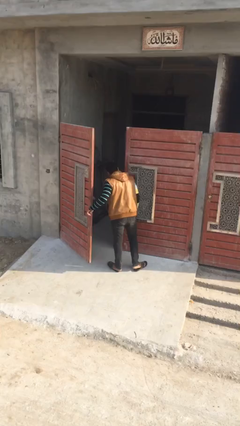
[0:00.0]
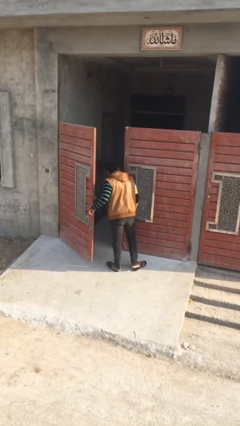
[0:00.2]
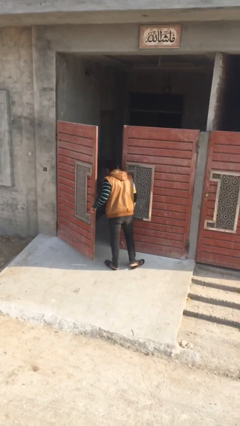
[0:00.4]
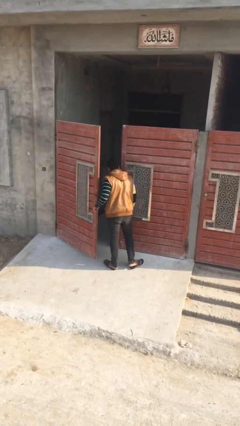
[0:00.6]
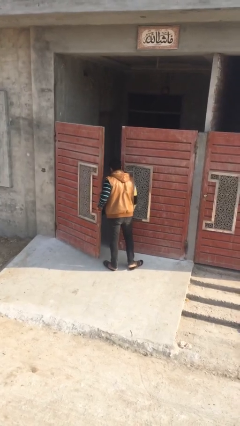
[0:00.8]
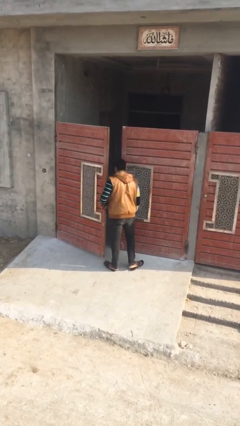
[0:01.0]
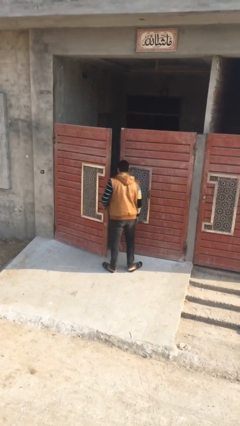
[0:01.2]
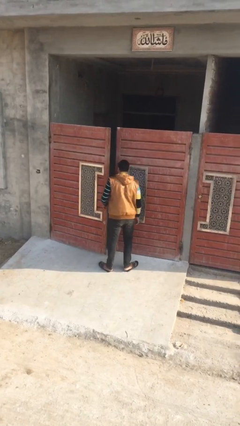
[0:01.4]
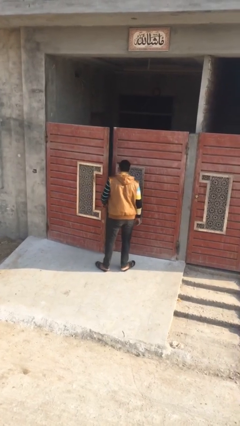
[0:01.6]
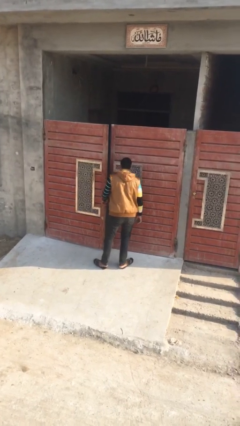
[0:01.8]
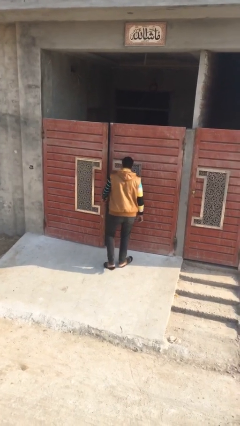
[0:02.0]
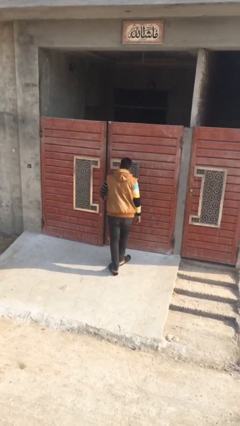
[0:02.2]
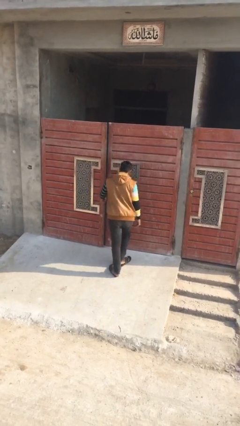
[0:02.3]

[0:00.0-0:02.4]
person closes facility door

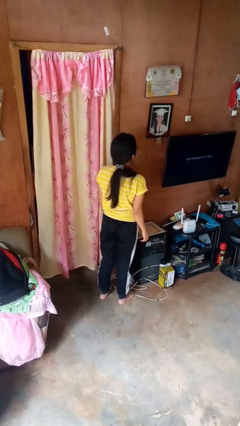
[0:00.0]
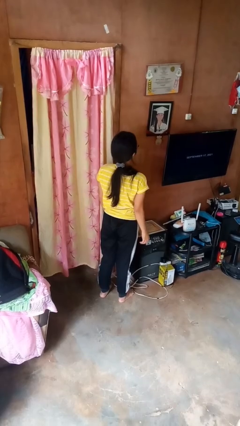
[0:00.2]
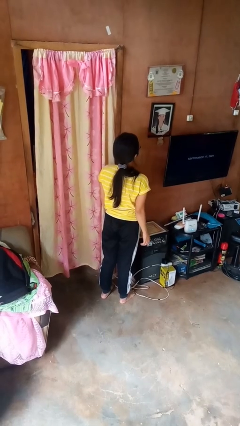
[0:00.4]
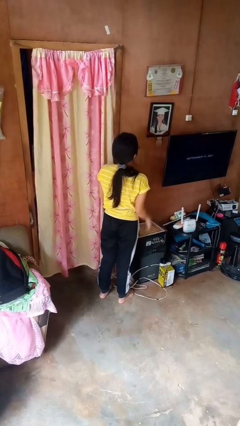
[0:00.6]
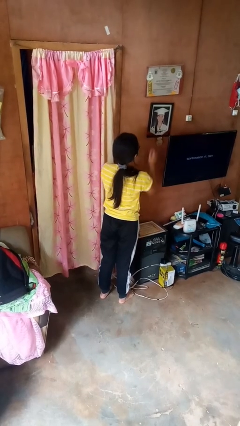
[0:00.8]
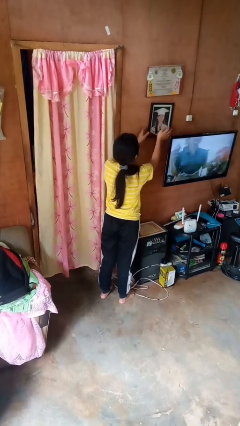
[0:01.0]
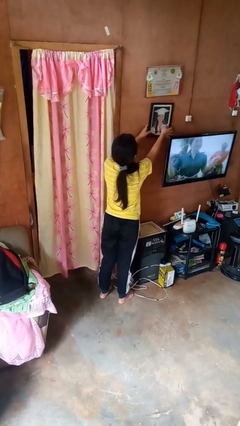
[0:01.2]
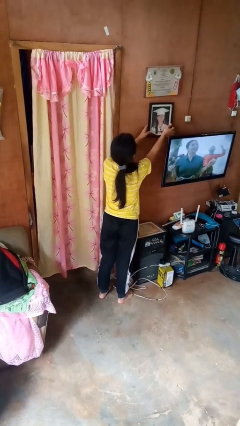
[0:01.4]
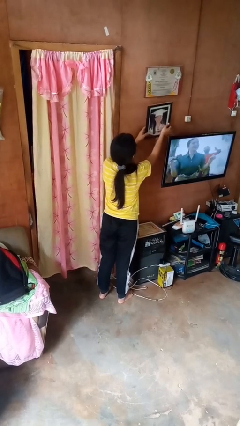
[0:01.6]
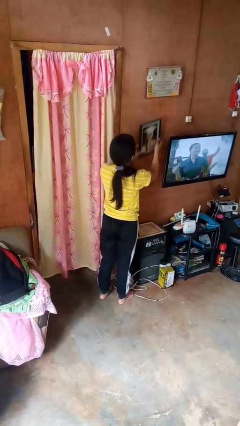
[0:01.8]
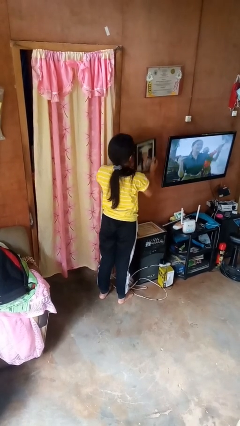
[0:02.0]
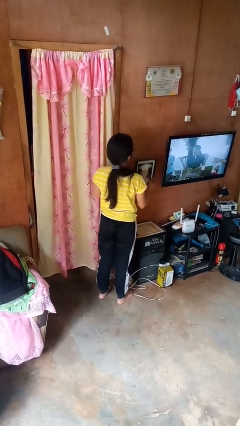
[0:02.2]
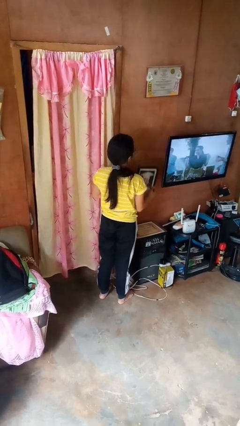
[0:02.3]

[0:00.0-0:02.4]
person takes down picture frame

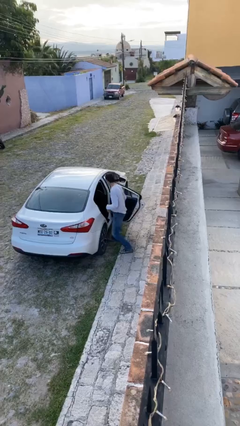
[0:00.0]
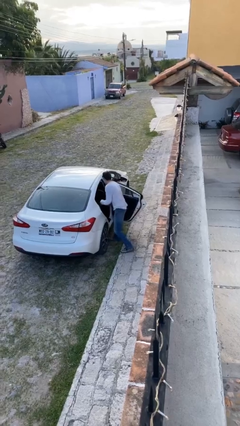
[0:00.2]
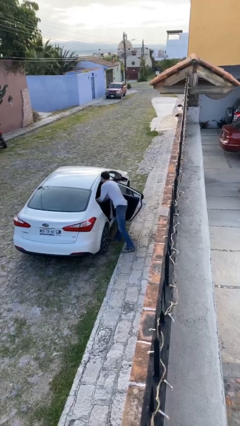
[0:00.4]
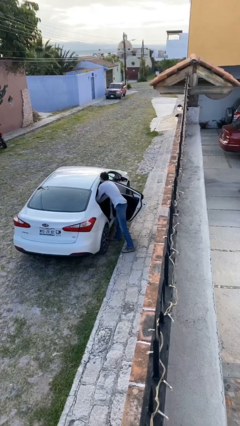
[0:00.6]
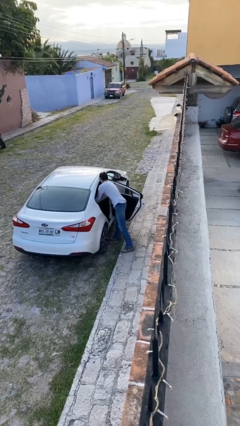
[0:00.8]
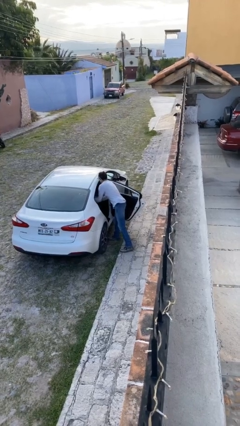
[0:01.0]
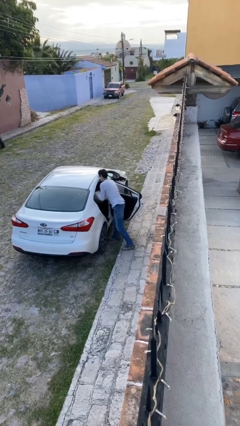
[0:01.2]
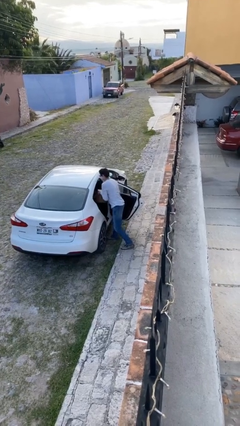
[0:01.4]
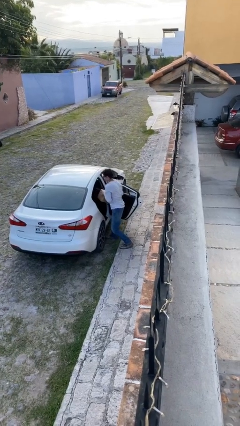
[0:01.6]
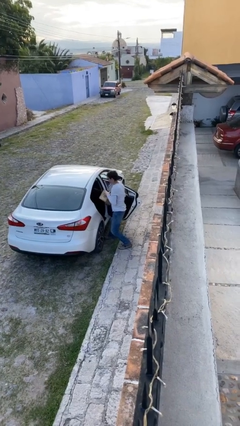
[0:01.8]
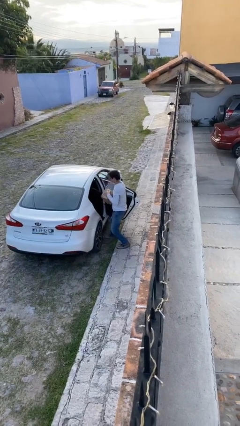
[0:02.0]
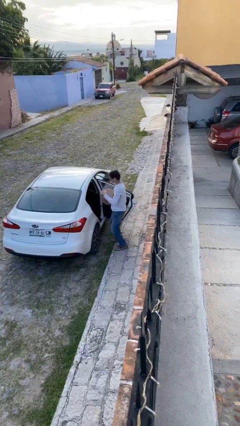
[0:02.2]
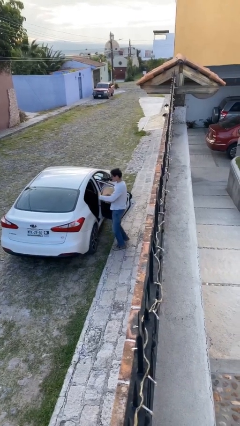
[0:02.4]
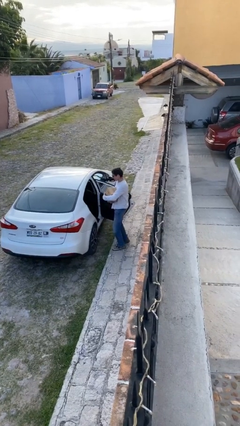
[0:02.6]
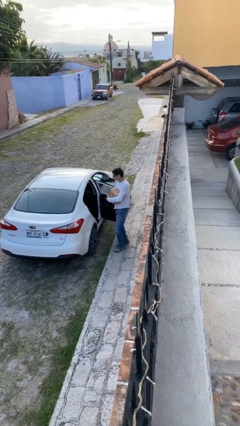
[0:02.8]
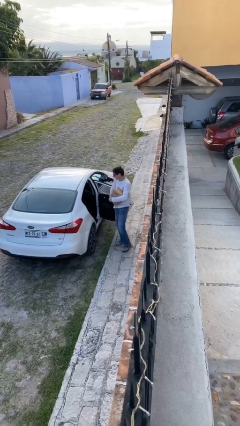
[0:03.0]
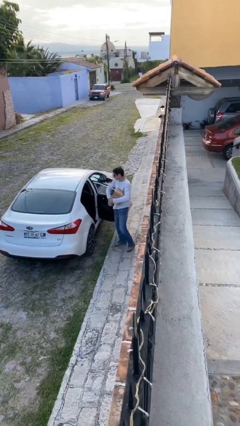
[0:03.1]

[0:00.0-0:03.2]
person unloads car

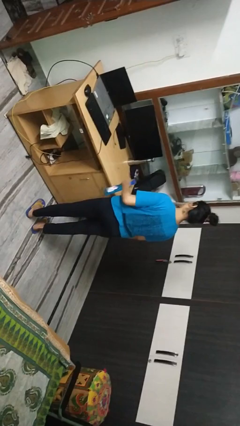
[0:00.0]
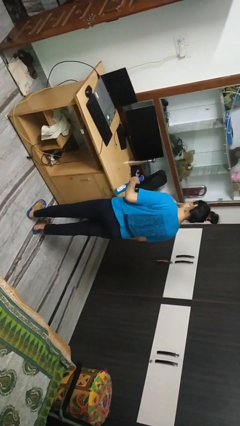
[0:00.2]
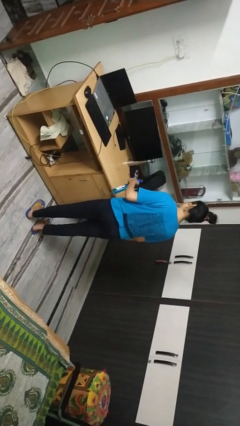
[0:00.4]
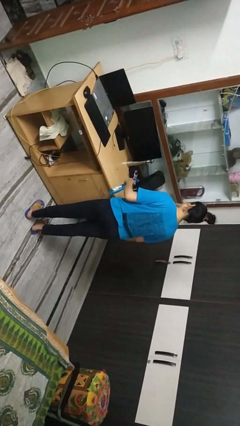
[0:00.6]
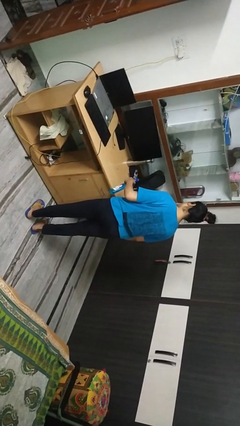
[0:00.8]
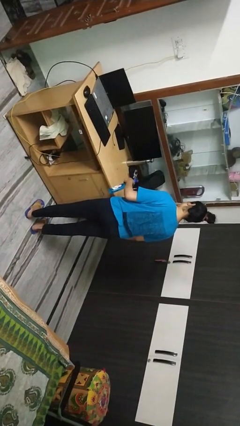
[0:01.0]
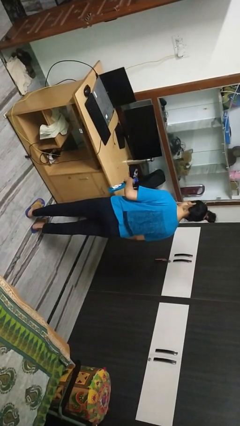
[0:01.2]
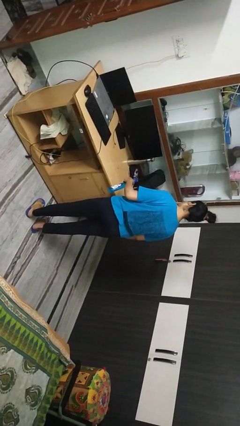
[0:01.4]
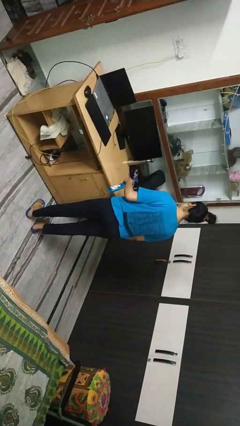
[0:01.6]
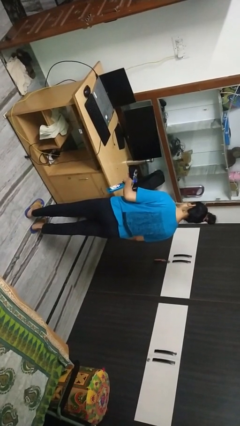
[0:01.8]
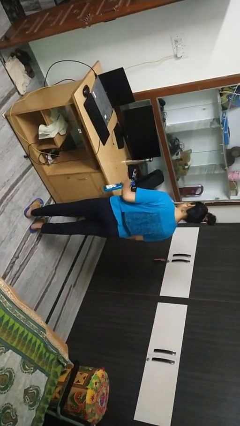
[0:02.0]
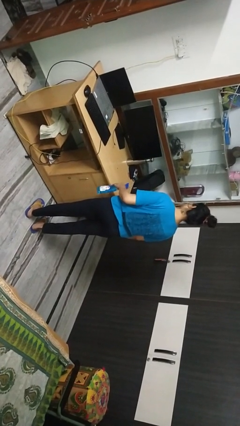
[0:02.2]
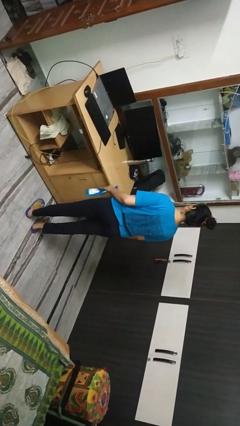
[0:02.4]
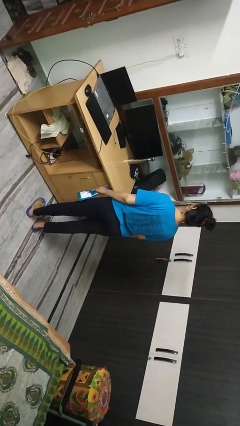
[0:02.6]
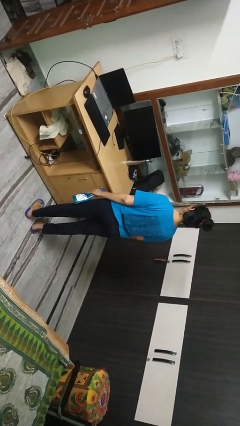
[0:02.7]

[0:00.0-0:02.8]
person sprays from bottle

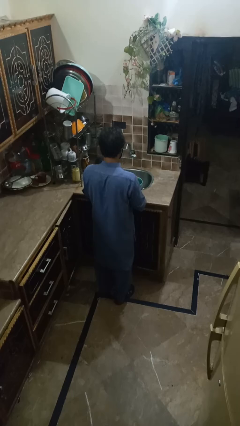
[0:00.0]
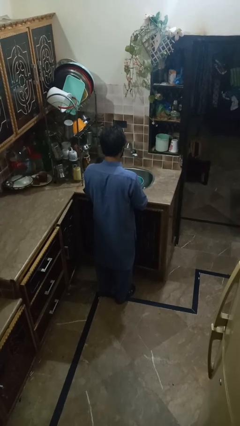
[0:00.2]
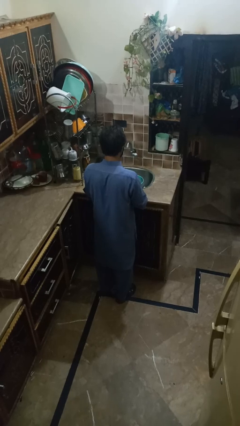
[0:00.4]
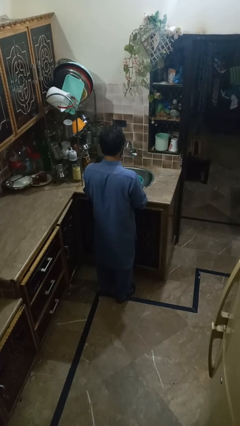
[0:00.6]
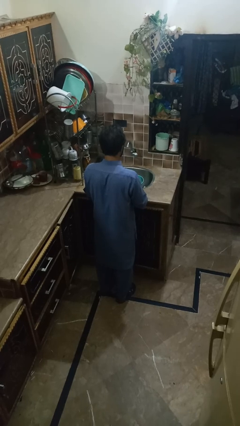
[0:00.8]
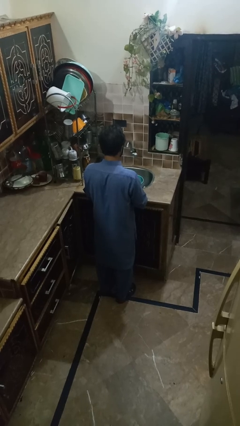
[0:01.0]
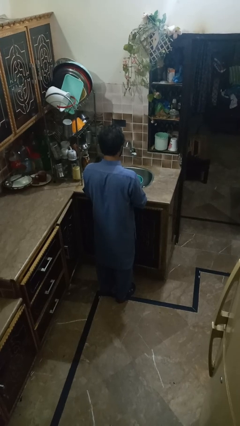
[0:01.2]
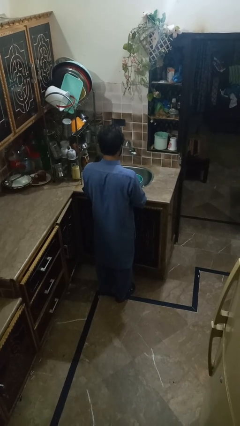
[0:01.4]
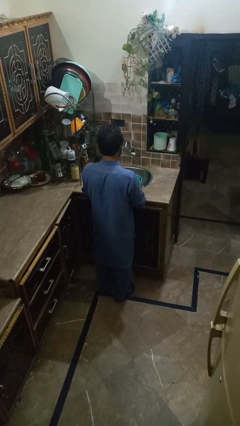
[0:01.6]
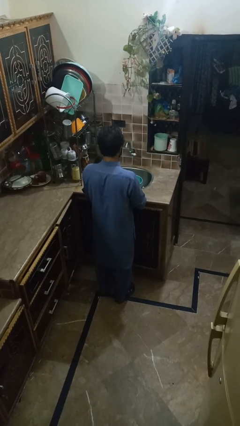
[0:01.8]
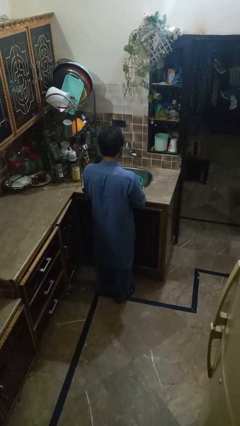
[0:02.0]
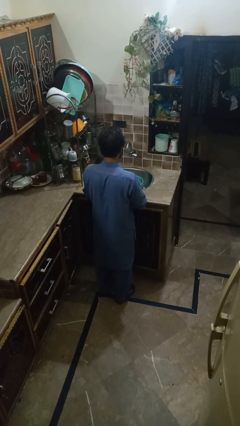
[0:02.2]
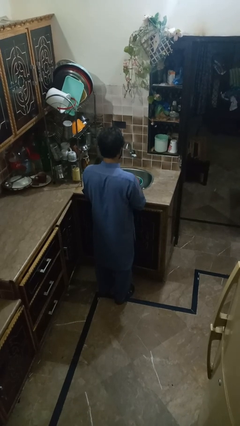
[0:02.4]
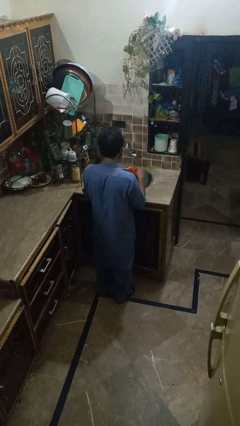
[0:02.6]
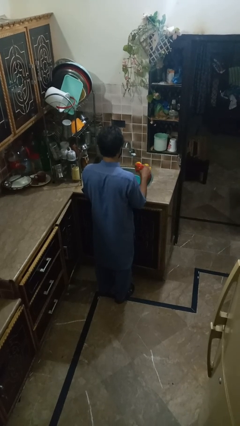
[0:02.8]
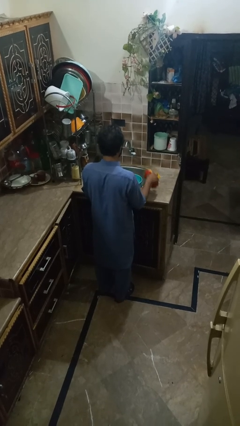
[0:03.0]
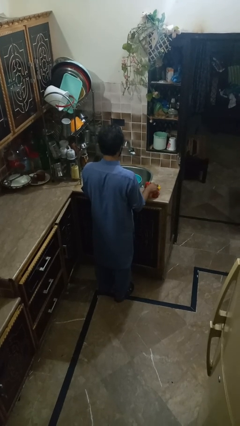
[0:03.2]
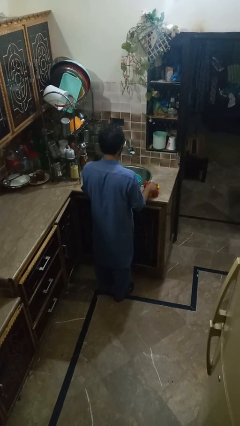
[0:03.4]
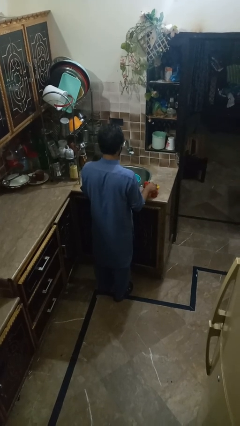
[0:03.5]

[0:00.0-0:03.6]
person pours into bowl

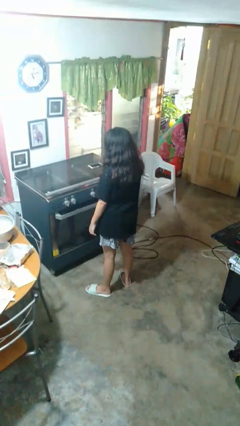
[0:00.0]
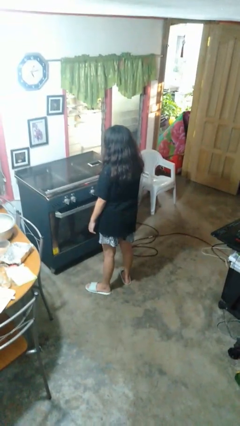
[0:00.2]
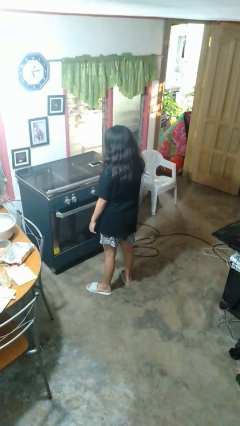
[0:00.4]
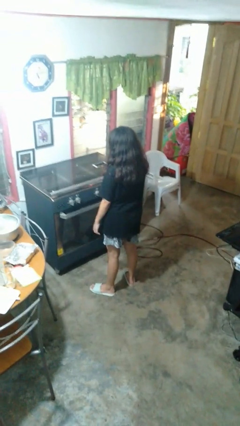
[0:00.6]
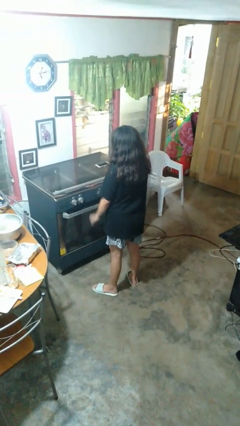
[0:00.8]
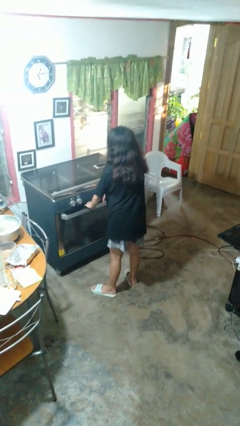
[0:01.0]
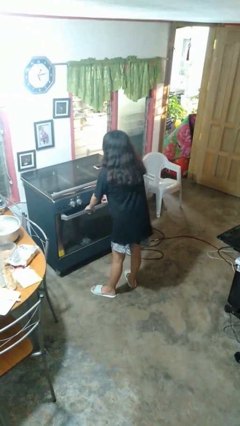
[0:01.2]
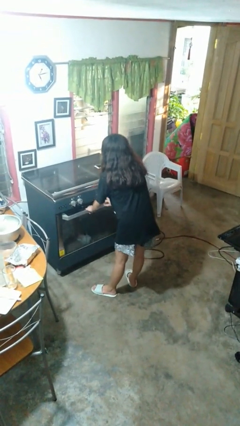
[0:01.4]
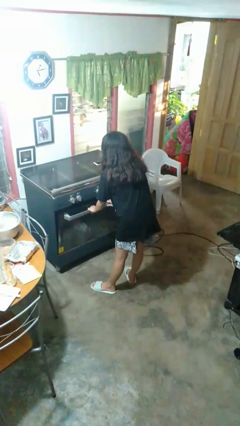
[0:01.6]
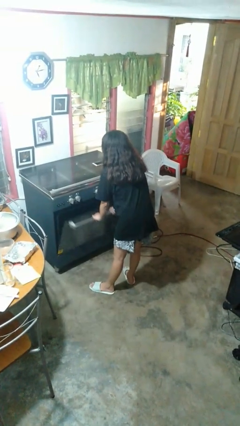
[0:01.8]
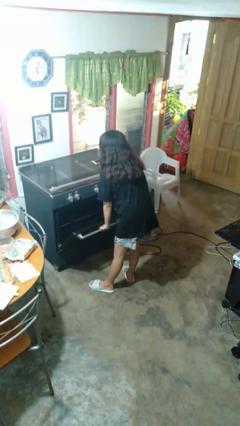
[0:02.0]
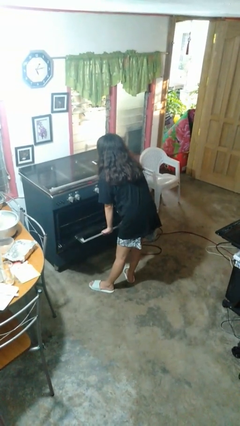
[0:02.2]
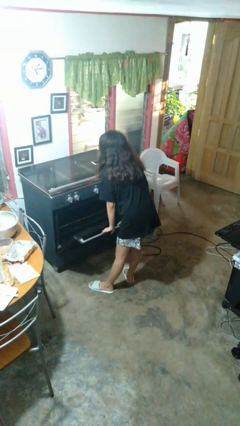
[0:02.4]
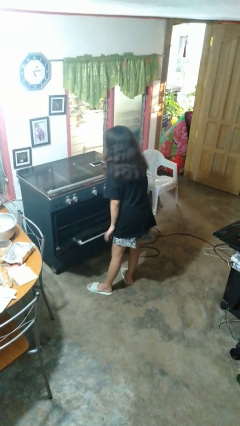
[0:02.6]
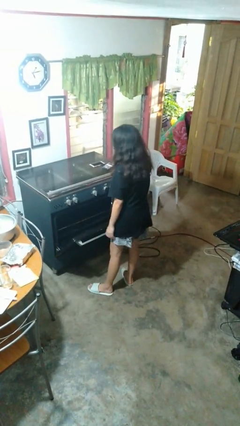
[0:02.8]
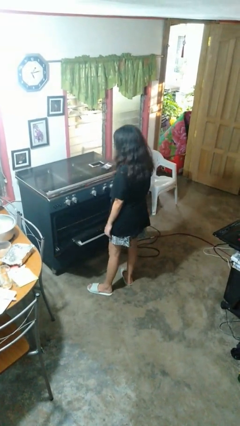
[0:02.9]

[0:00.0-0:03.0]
person opens oven door
